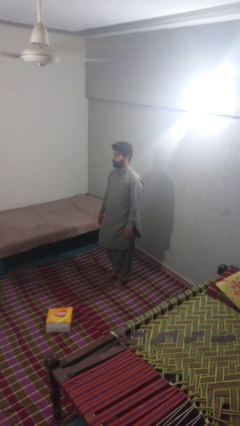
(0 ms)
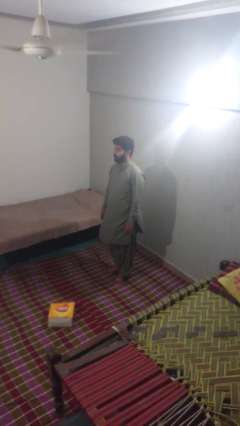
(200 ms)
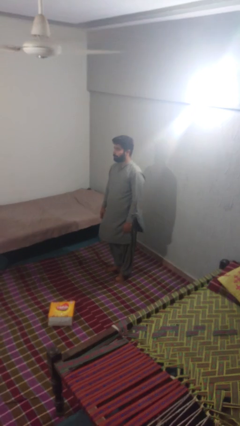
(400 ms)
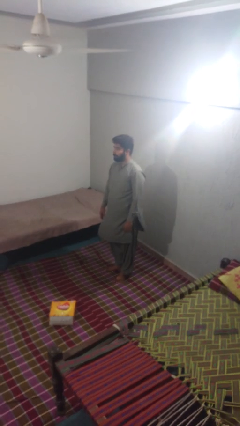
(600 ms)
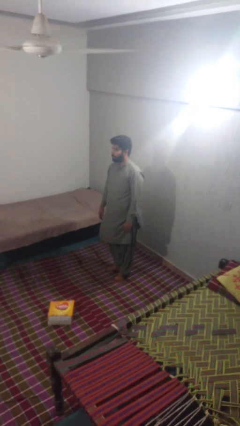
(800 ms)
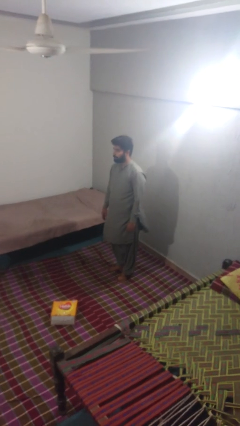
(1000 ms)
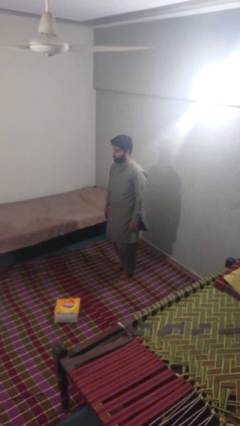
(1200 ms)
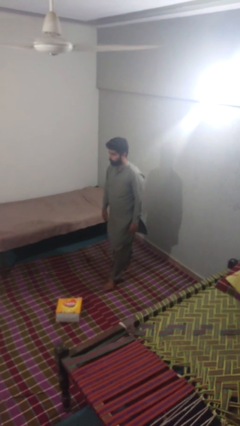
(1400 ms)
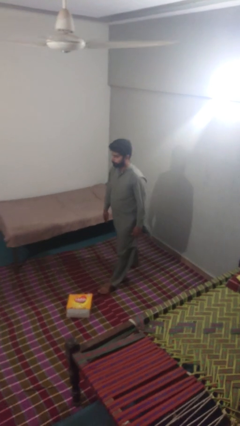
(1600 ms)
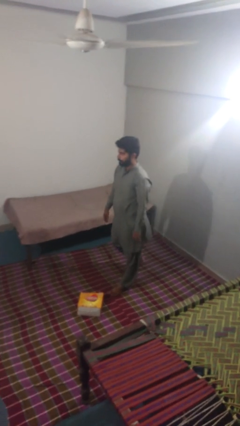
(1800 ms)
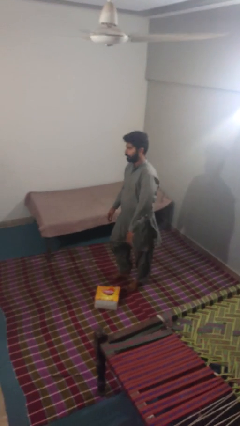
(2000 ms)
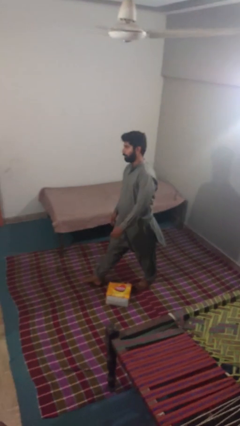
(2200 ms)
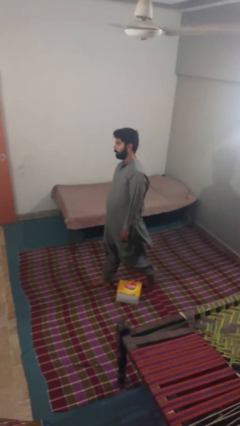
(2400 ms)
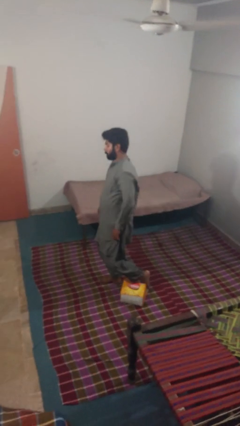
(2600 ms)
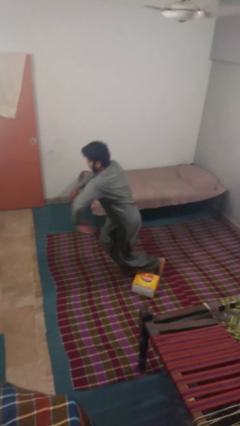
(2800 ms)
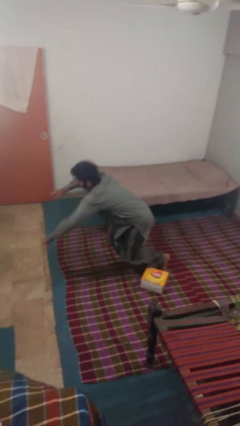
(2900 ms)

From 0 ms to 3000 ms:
person trips on object on floor

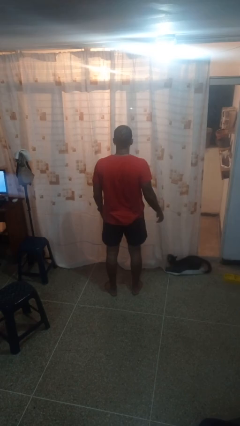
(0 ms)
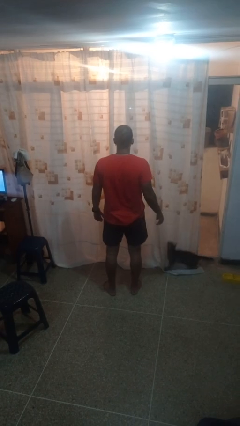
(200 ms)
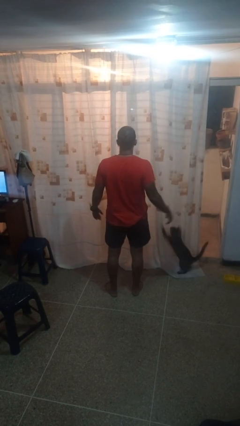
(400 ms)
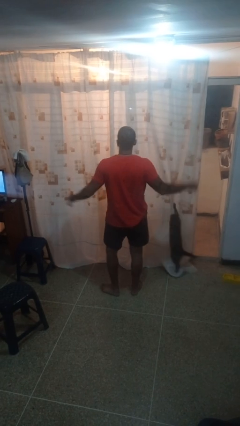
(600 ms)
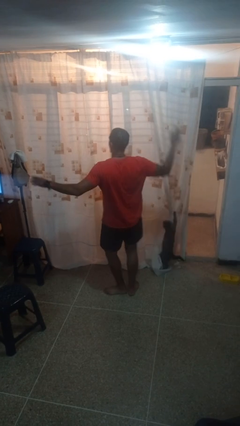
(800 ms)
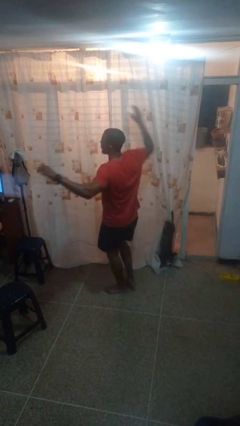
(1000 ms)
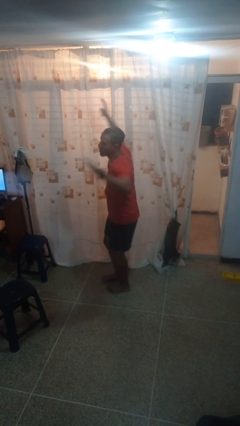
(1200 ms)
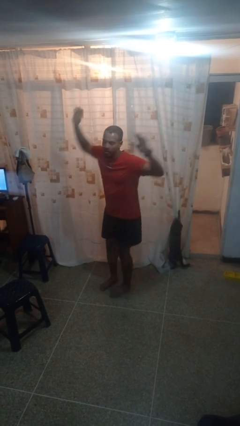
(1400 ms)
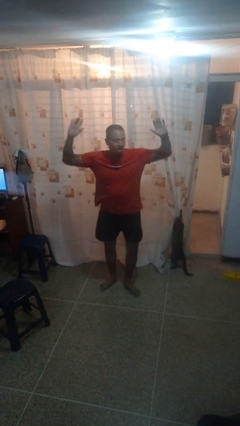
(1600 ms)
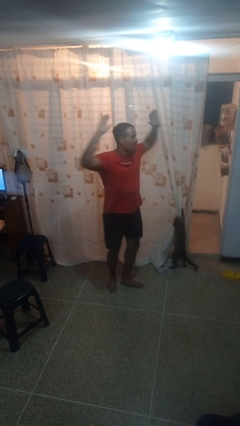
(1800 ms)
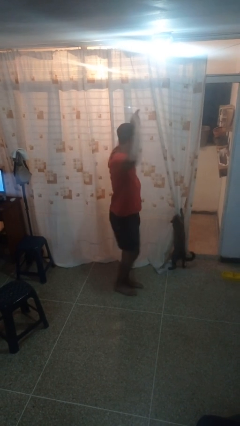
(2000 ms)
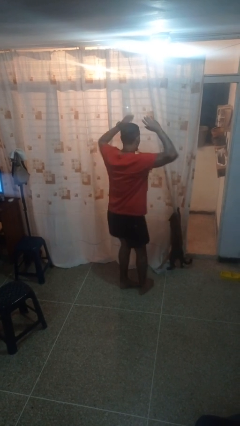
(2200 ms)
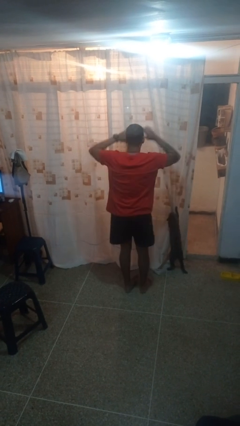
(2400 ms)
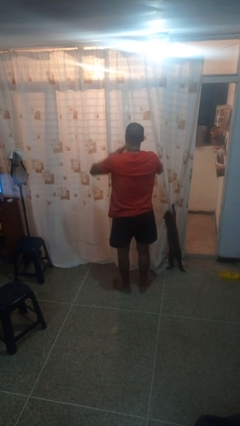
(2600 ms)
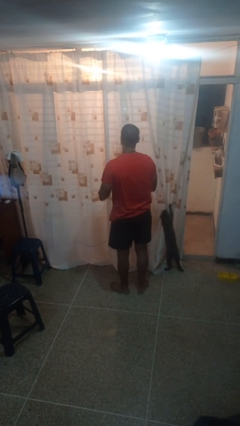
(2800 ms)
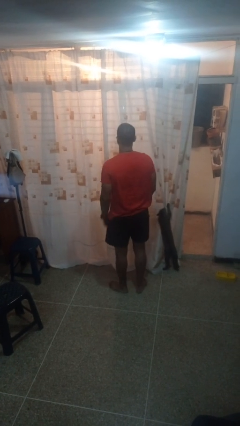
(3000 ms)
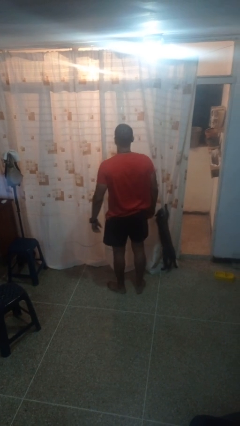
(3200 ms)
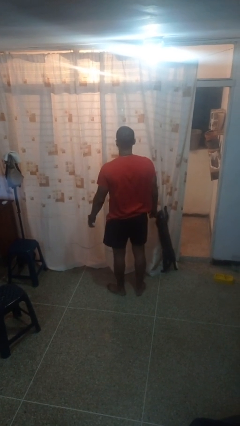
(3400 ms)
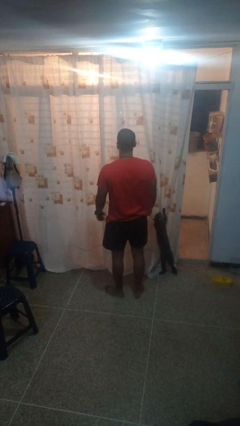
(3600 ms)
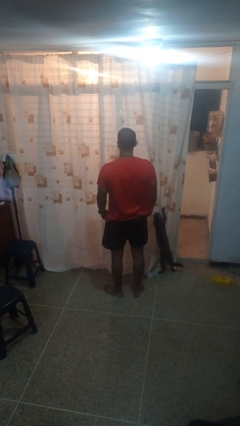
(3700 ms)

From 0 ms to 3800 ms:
person twirls

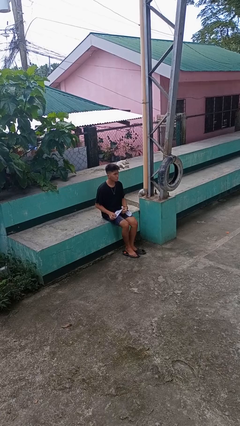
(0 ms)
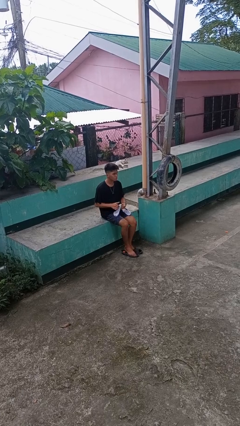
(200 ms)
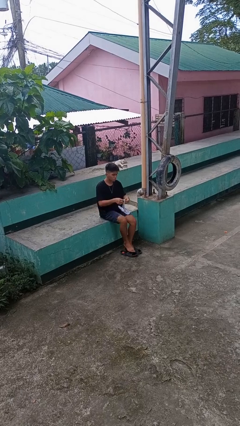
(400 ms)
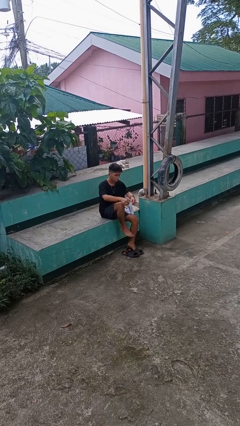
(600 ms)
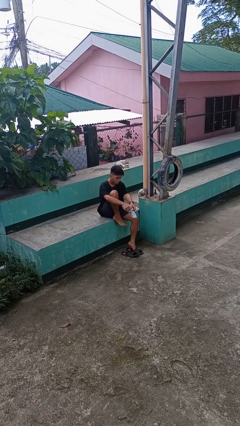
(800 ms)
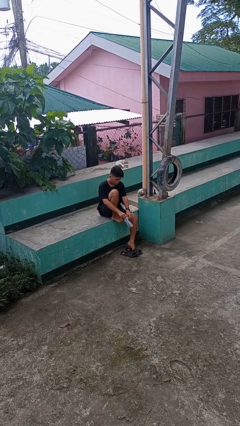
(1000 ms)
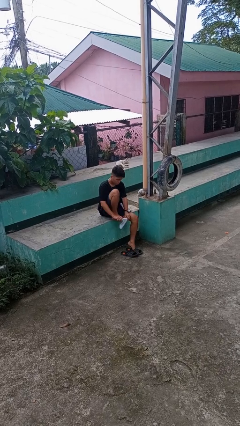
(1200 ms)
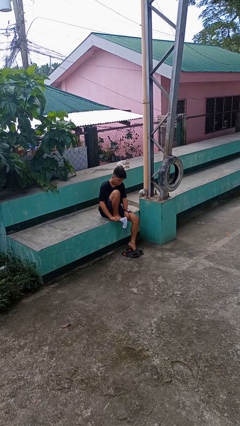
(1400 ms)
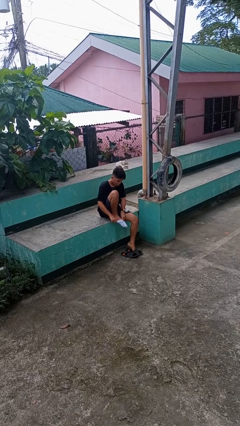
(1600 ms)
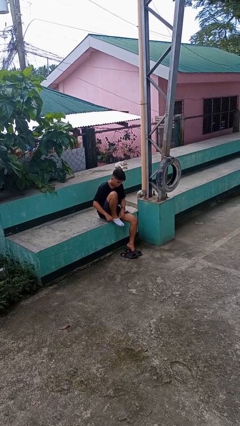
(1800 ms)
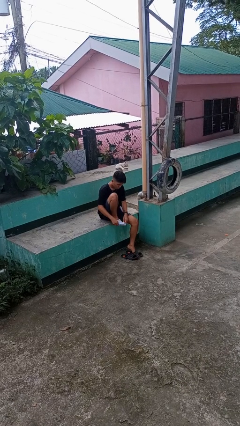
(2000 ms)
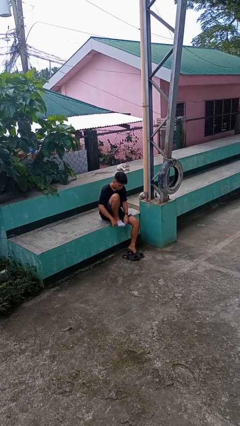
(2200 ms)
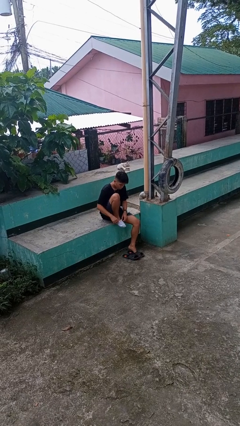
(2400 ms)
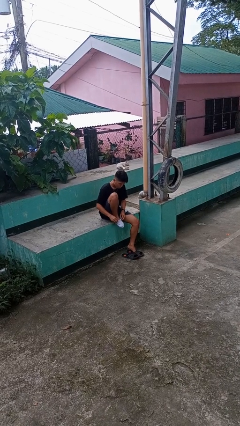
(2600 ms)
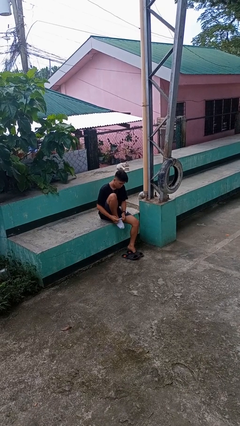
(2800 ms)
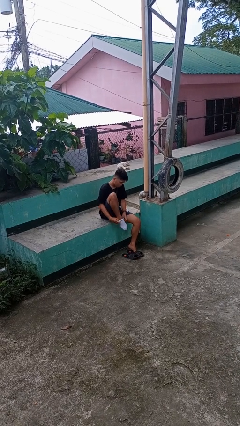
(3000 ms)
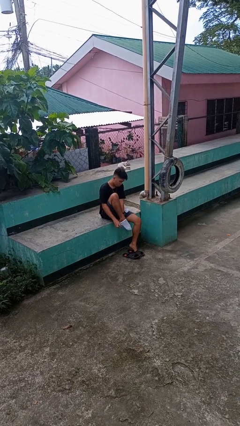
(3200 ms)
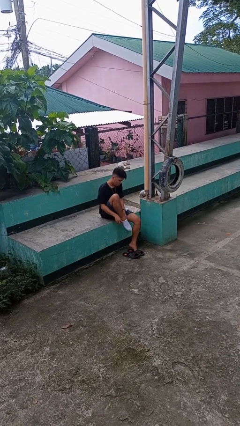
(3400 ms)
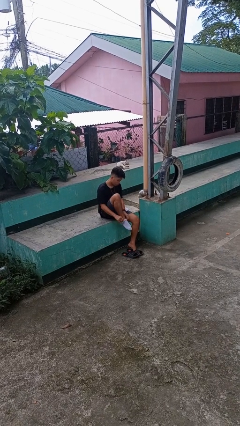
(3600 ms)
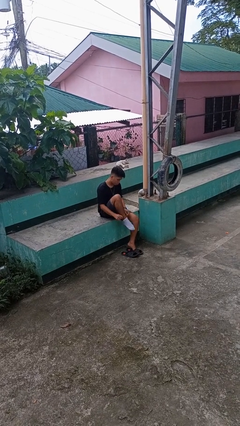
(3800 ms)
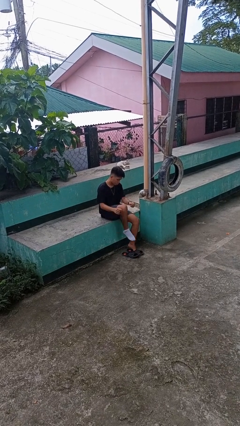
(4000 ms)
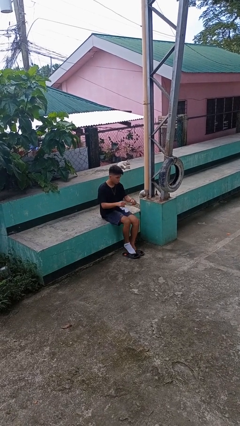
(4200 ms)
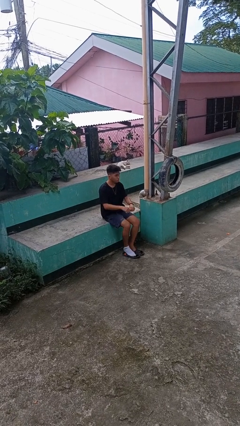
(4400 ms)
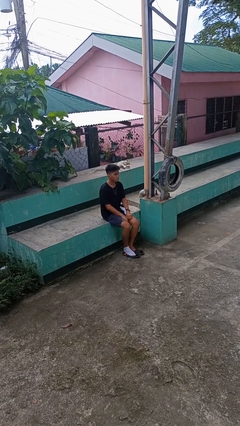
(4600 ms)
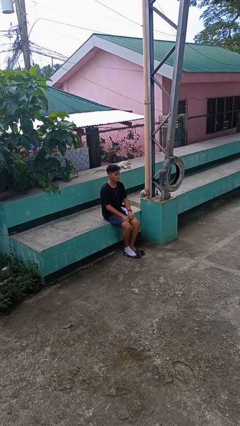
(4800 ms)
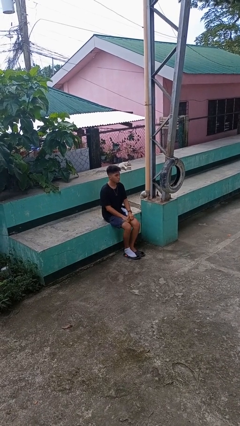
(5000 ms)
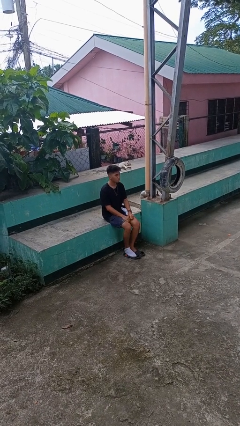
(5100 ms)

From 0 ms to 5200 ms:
person puts on socks

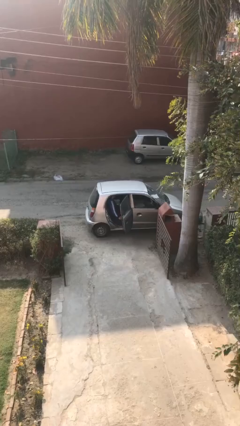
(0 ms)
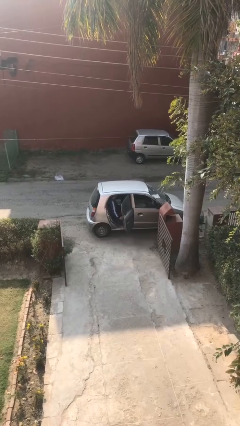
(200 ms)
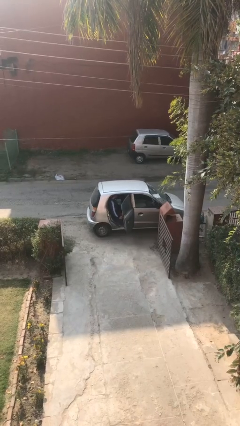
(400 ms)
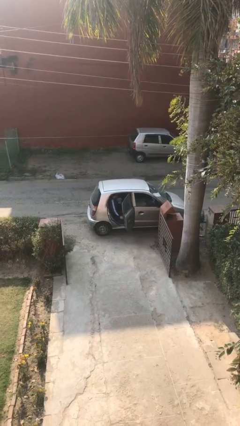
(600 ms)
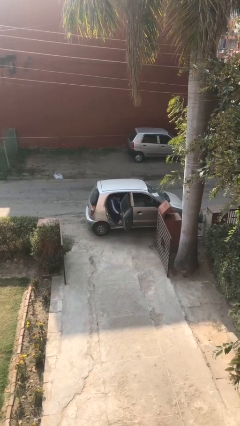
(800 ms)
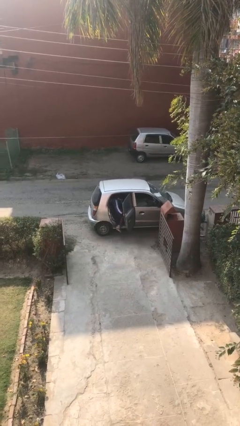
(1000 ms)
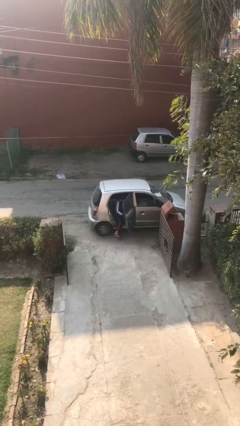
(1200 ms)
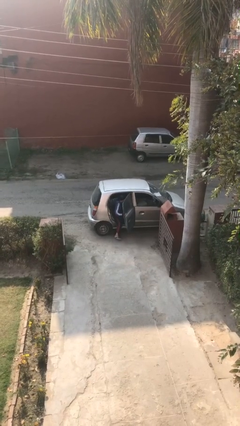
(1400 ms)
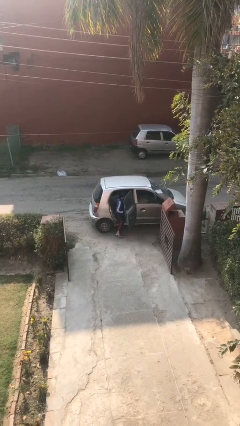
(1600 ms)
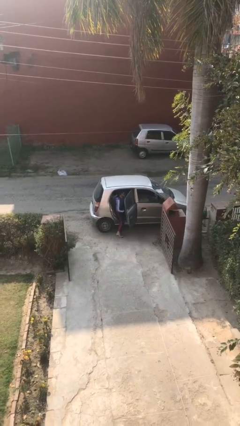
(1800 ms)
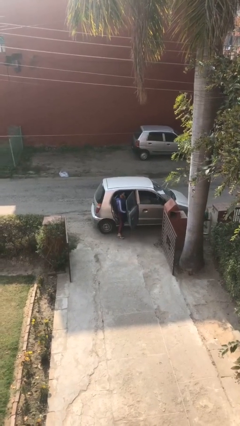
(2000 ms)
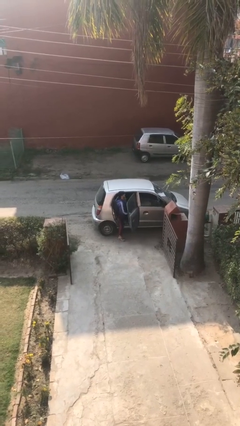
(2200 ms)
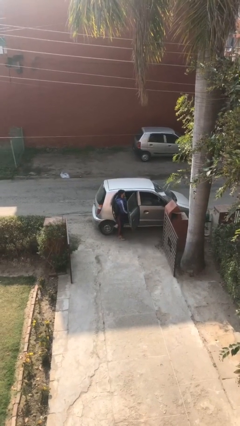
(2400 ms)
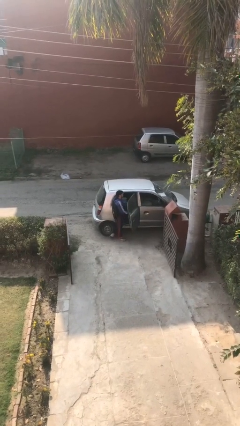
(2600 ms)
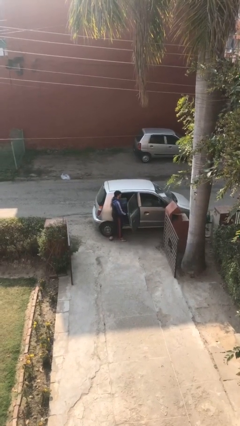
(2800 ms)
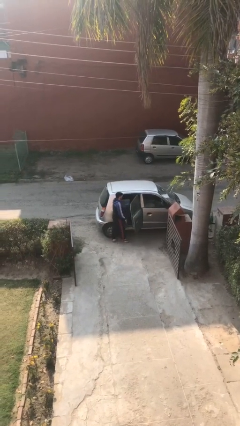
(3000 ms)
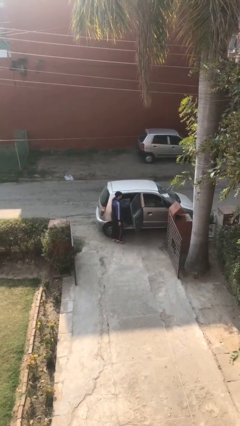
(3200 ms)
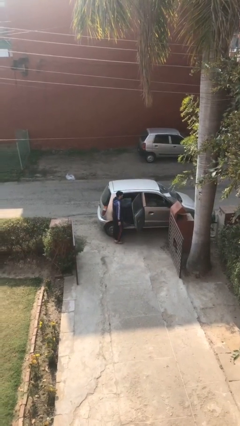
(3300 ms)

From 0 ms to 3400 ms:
person exits car

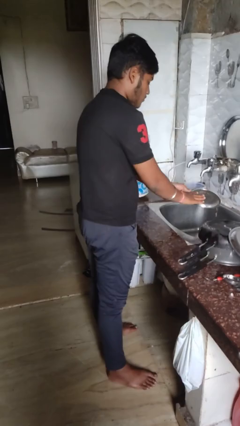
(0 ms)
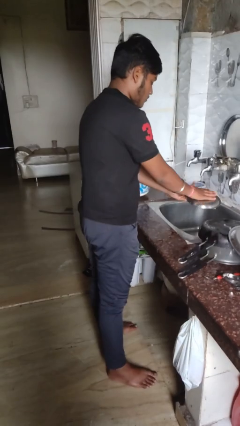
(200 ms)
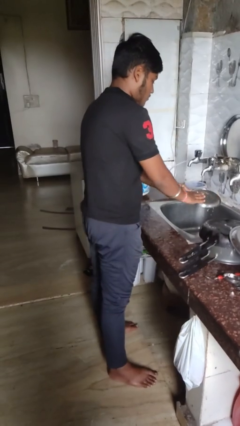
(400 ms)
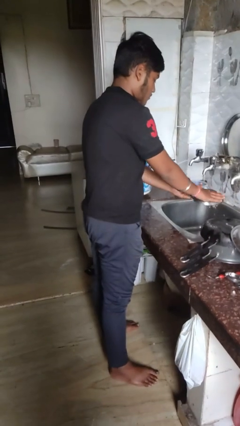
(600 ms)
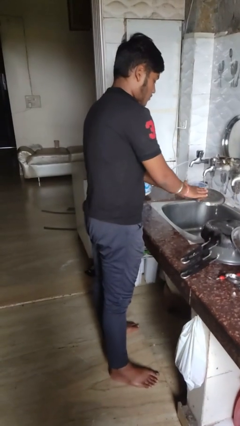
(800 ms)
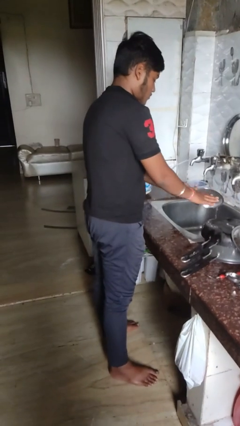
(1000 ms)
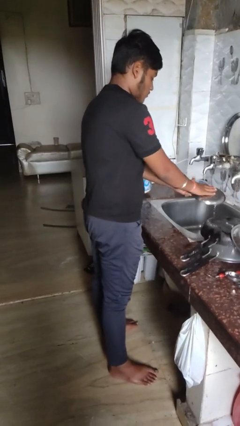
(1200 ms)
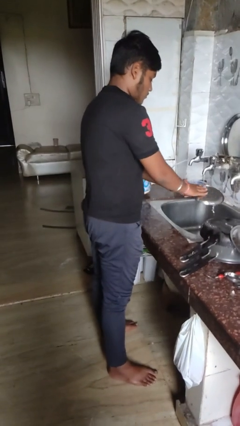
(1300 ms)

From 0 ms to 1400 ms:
person washes dish

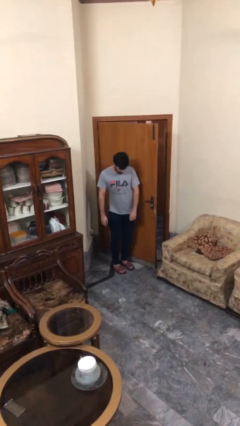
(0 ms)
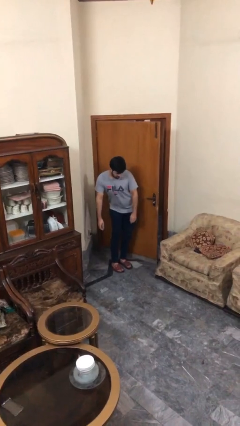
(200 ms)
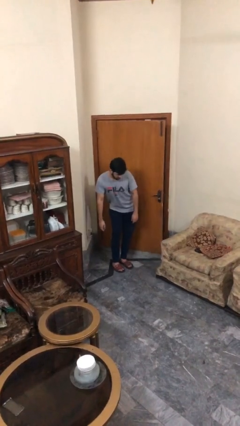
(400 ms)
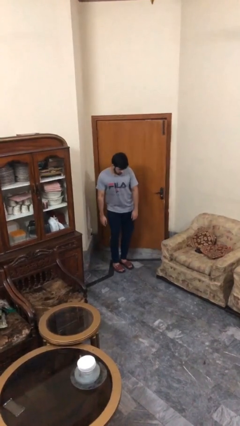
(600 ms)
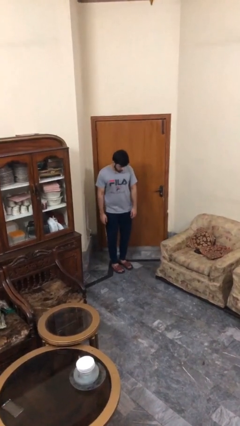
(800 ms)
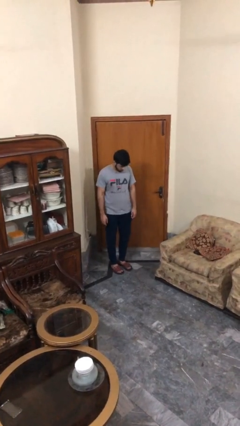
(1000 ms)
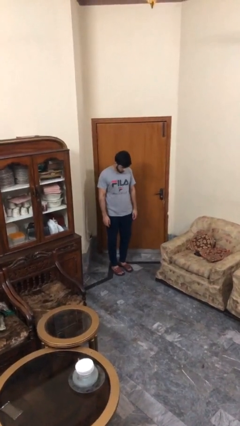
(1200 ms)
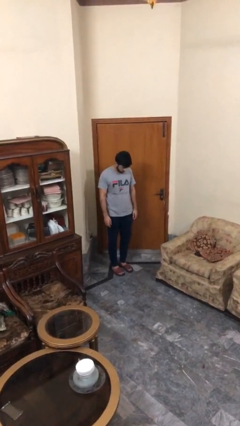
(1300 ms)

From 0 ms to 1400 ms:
person closes door with hip
